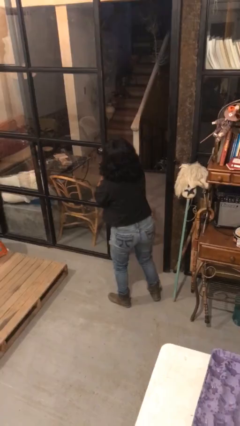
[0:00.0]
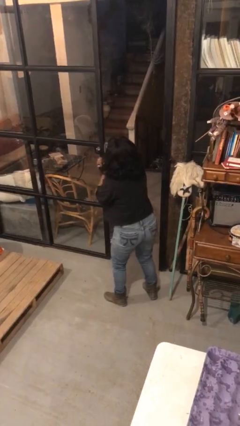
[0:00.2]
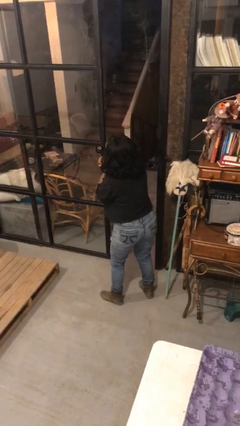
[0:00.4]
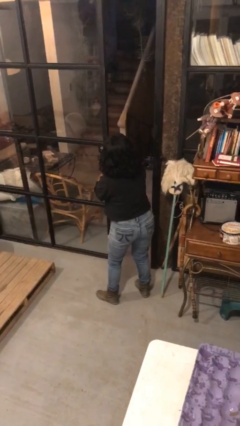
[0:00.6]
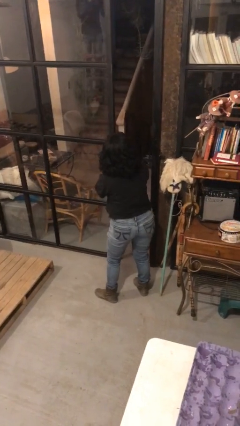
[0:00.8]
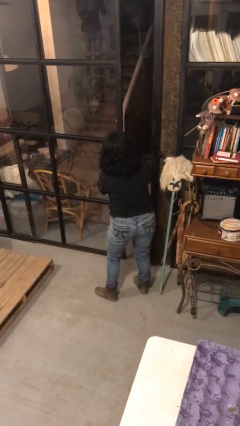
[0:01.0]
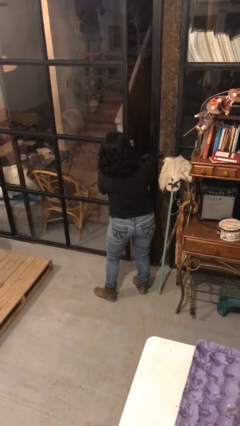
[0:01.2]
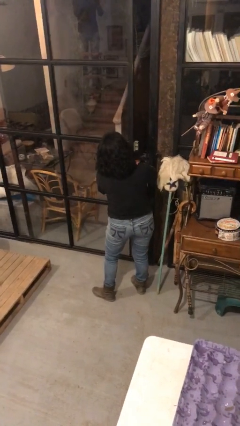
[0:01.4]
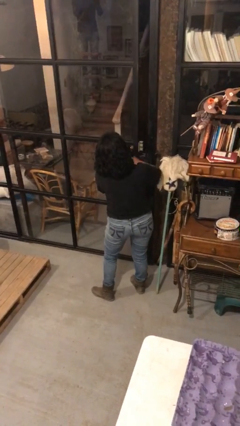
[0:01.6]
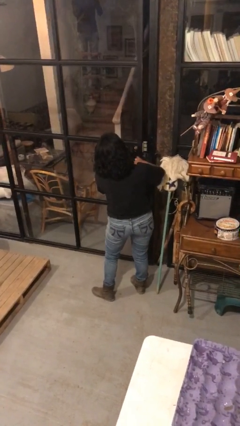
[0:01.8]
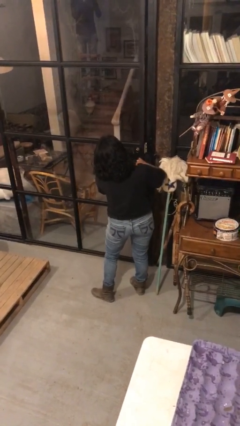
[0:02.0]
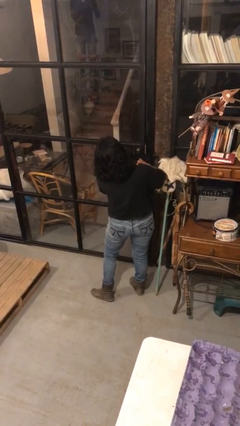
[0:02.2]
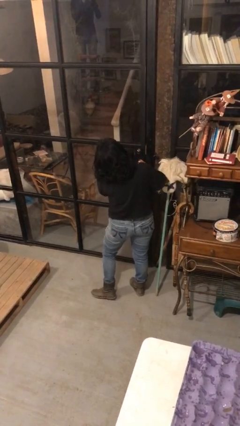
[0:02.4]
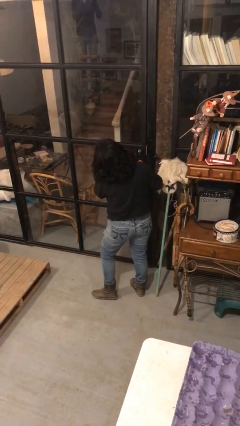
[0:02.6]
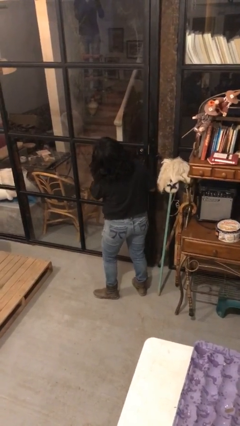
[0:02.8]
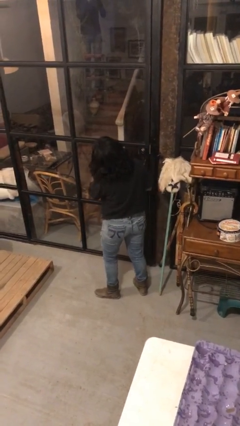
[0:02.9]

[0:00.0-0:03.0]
person closes facility door

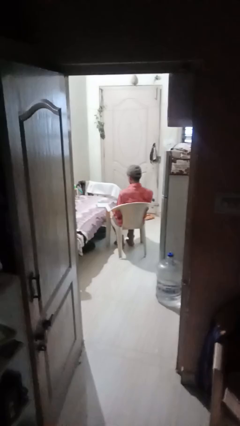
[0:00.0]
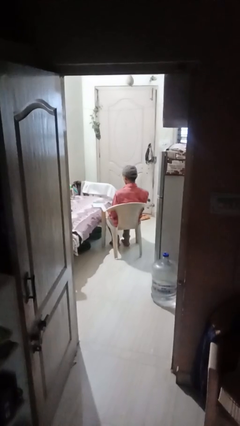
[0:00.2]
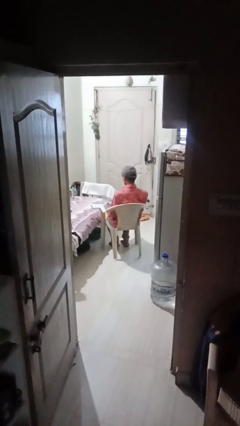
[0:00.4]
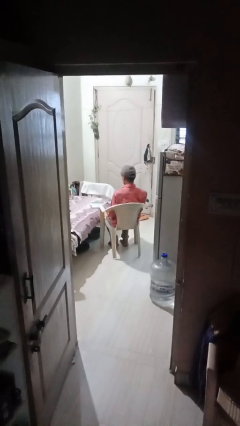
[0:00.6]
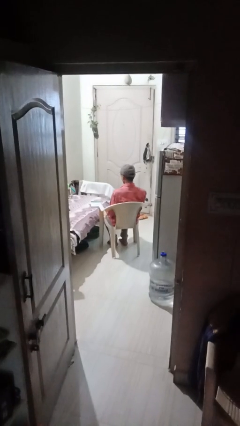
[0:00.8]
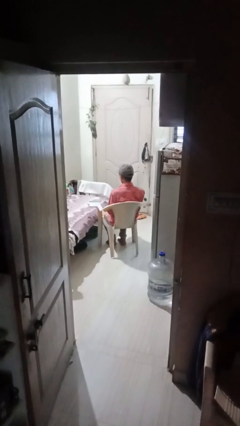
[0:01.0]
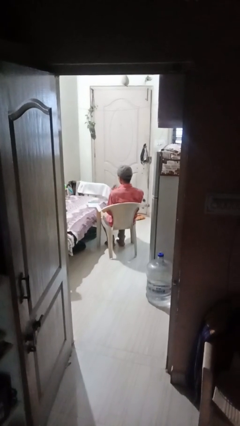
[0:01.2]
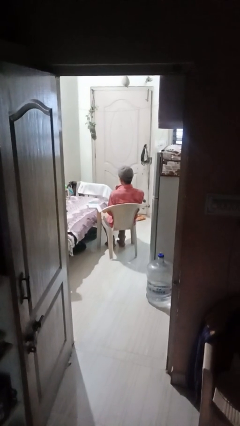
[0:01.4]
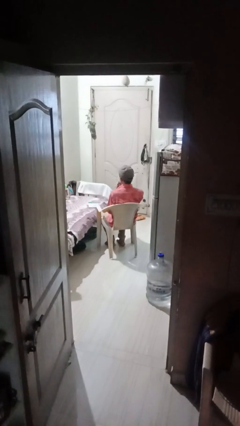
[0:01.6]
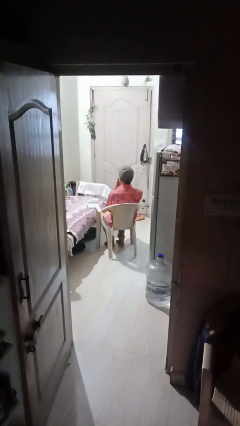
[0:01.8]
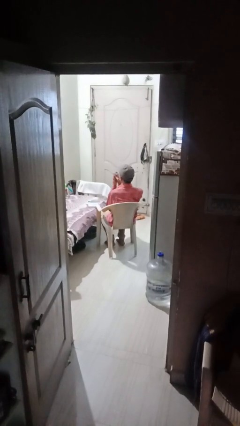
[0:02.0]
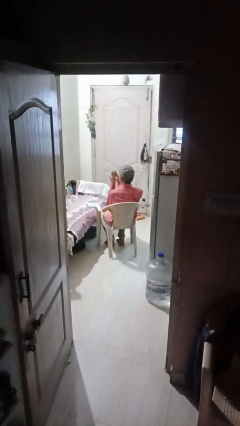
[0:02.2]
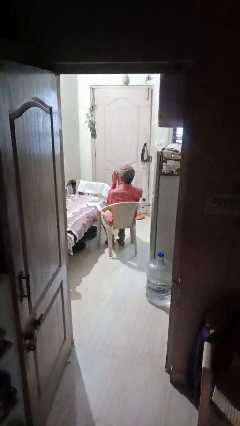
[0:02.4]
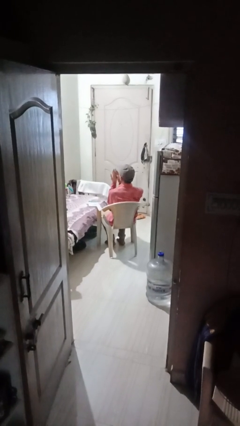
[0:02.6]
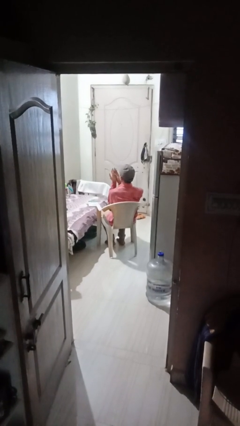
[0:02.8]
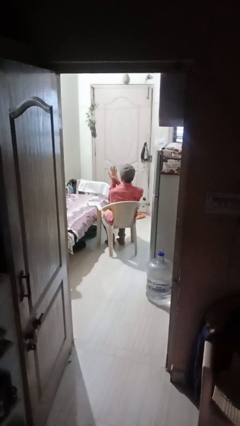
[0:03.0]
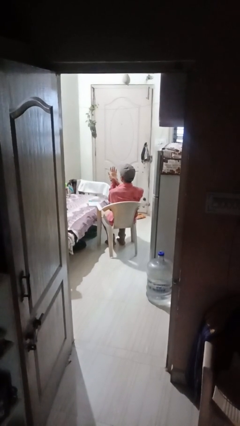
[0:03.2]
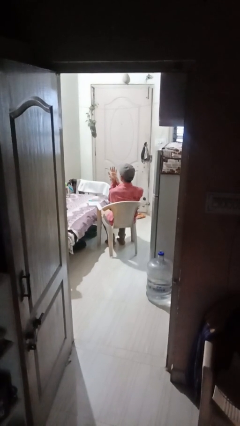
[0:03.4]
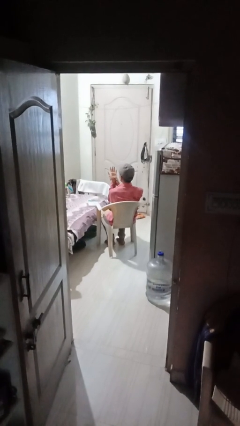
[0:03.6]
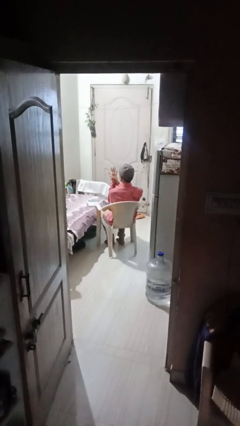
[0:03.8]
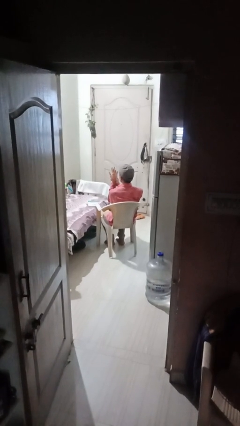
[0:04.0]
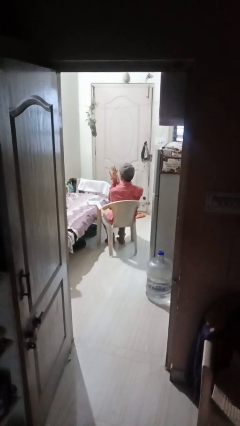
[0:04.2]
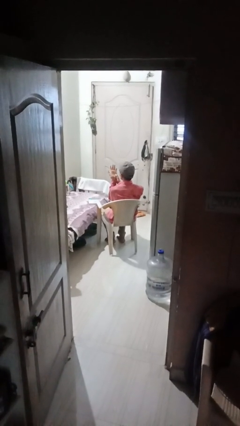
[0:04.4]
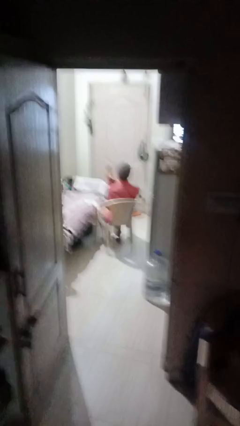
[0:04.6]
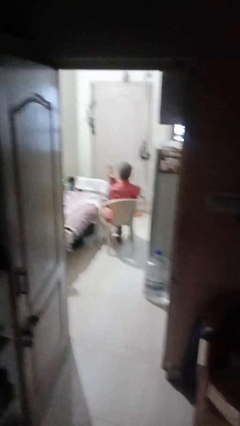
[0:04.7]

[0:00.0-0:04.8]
person looks at hands in lap

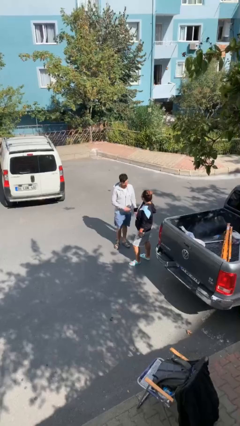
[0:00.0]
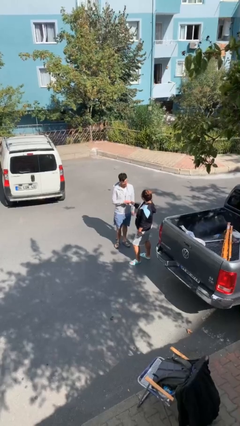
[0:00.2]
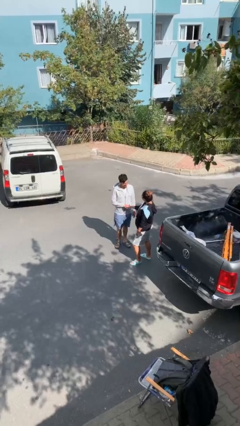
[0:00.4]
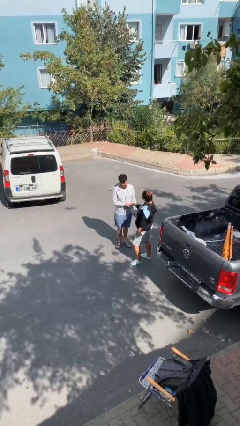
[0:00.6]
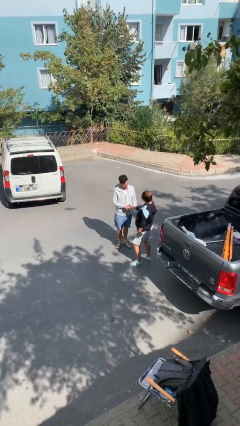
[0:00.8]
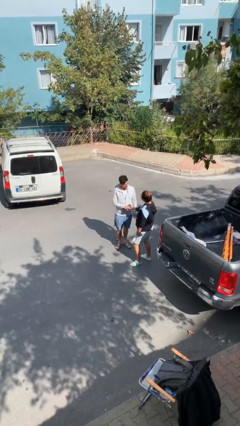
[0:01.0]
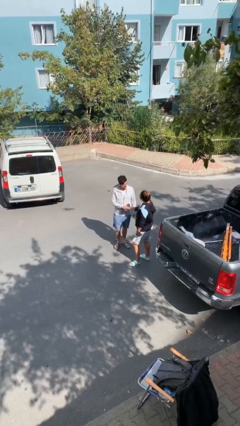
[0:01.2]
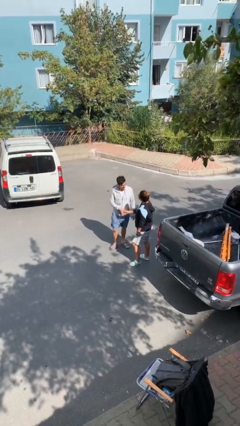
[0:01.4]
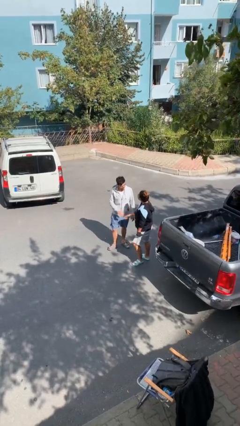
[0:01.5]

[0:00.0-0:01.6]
person shakes hand

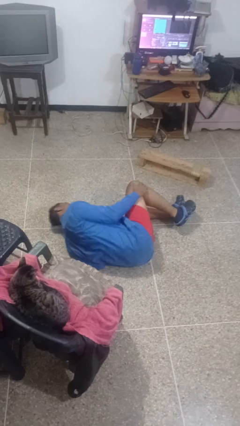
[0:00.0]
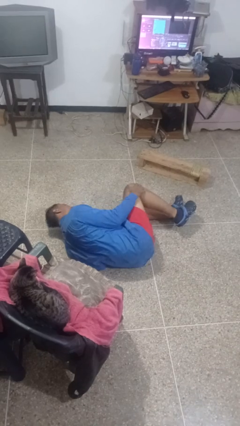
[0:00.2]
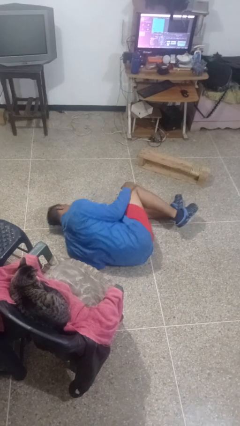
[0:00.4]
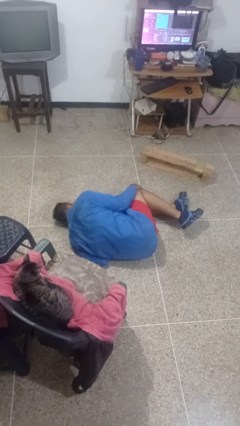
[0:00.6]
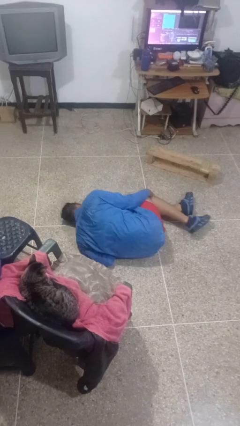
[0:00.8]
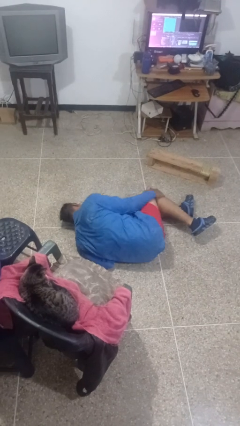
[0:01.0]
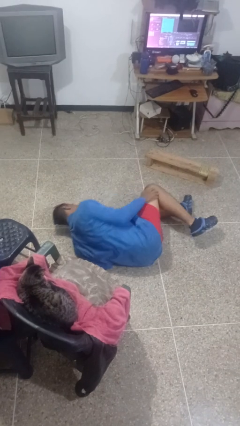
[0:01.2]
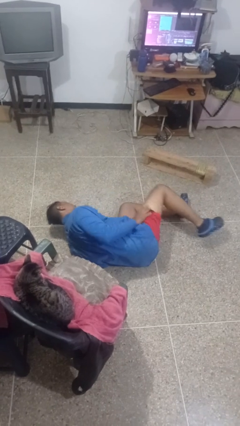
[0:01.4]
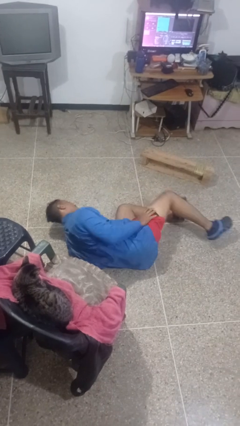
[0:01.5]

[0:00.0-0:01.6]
person lies down on floor

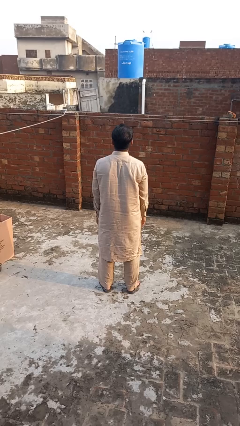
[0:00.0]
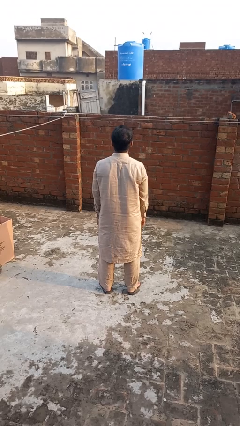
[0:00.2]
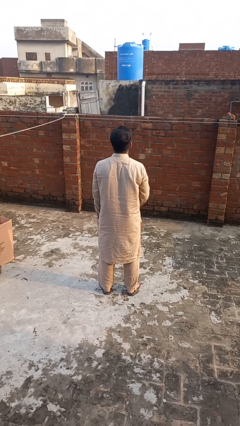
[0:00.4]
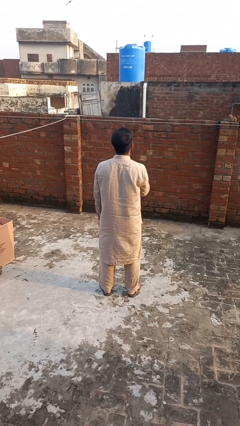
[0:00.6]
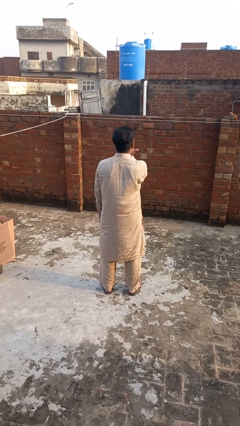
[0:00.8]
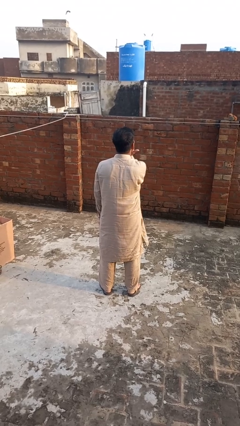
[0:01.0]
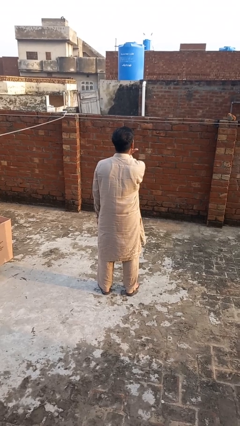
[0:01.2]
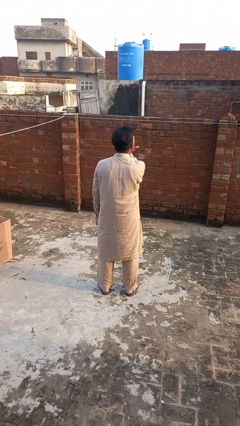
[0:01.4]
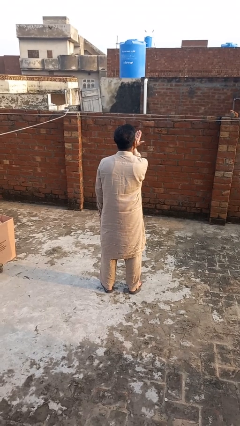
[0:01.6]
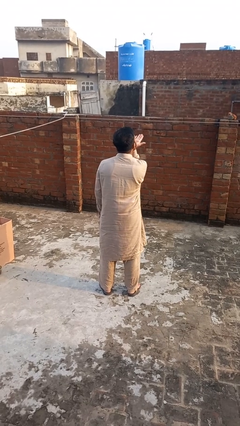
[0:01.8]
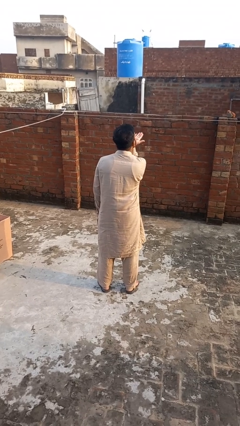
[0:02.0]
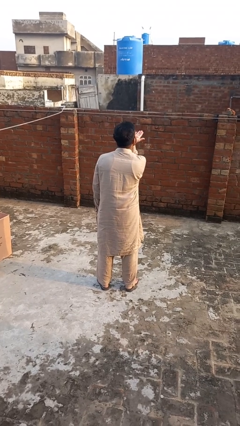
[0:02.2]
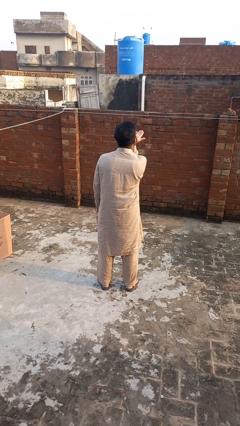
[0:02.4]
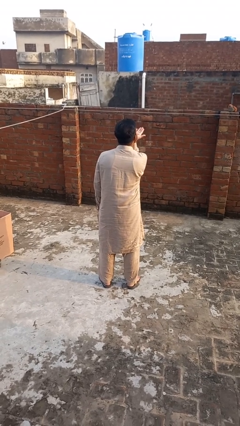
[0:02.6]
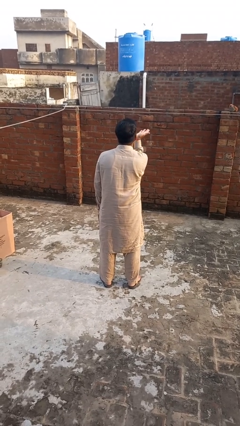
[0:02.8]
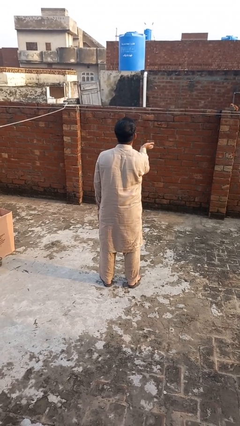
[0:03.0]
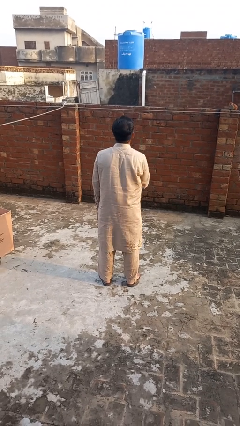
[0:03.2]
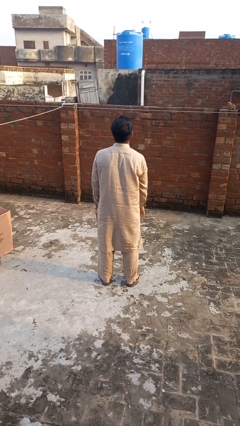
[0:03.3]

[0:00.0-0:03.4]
person gestures blow kiss

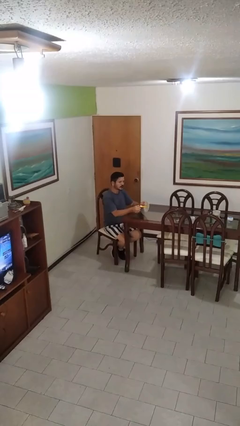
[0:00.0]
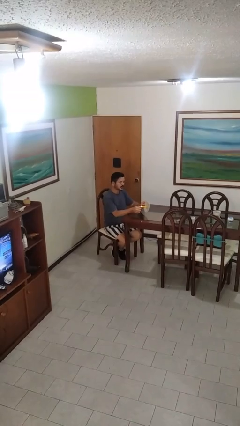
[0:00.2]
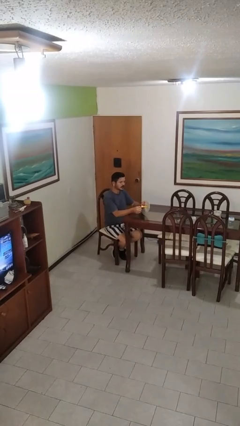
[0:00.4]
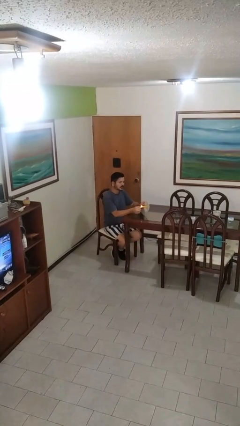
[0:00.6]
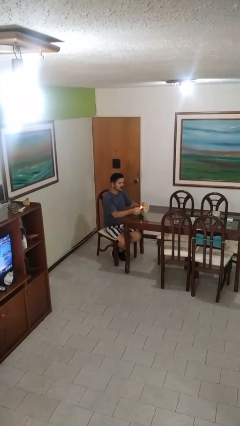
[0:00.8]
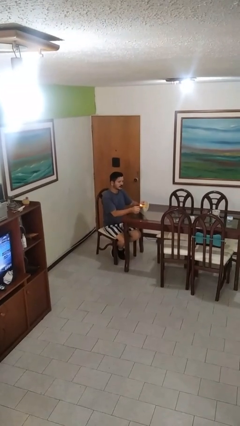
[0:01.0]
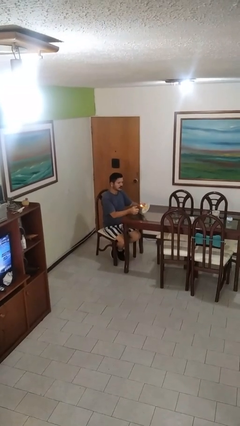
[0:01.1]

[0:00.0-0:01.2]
person lights candle

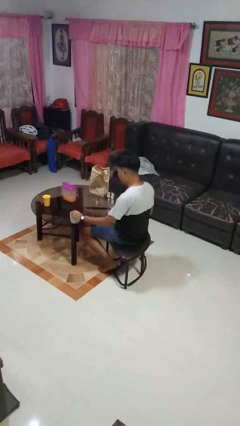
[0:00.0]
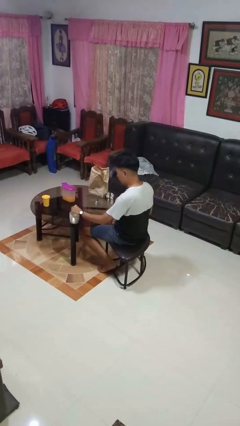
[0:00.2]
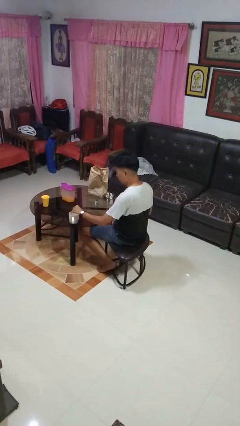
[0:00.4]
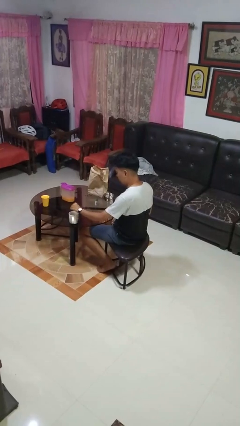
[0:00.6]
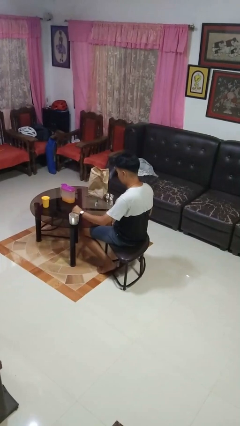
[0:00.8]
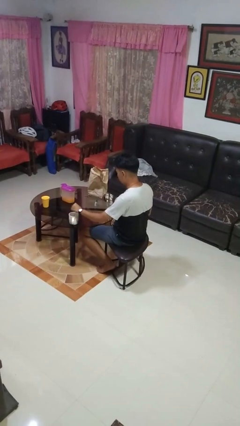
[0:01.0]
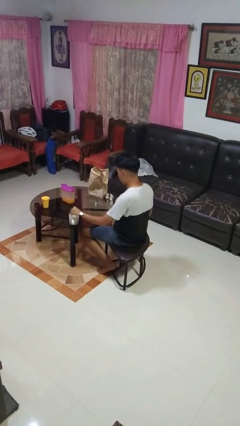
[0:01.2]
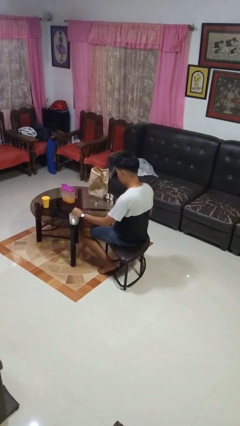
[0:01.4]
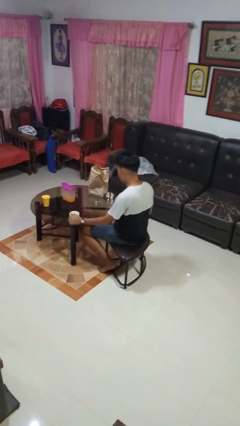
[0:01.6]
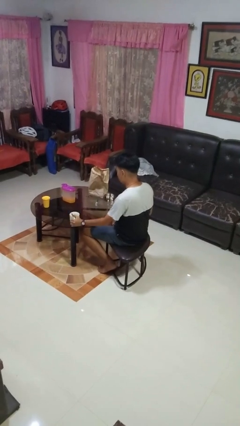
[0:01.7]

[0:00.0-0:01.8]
person stirs mug
